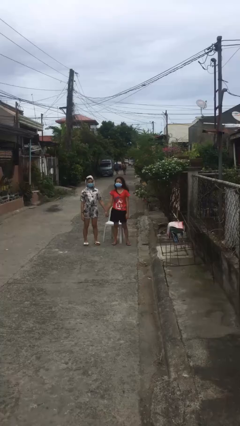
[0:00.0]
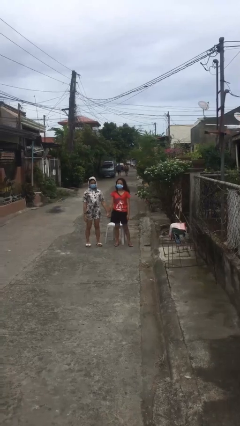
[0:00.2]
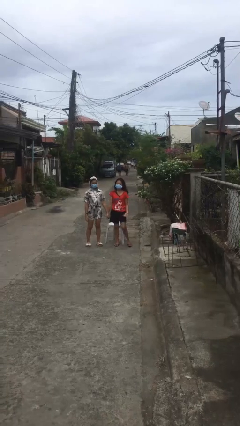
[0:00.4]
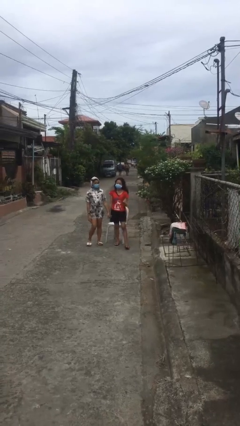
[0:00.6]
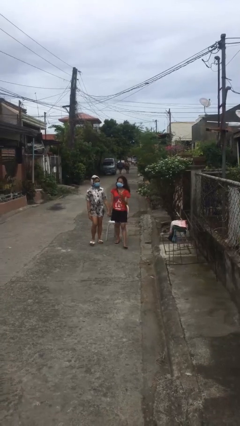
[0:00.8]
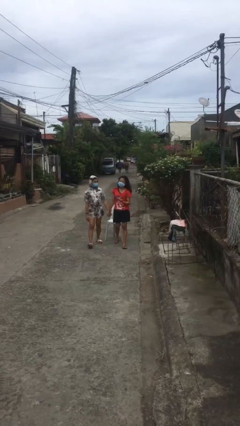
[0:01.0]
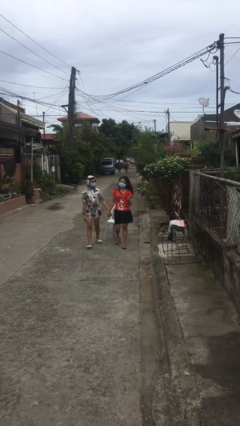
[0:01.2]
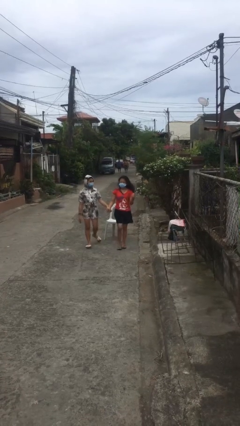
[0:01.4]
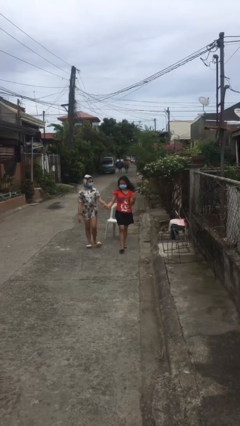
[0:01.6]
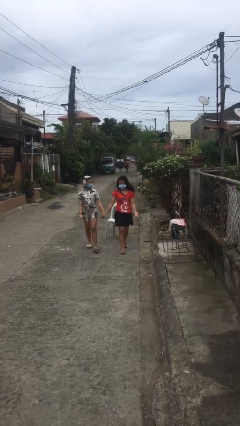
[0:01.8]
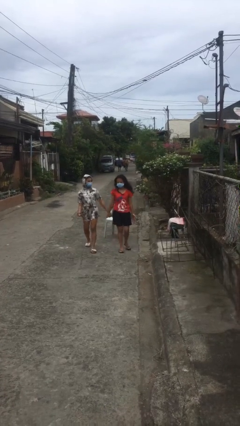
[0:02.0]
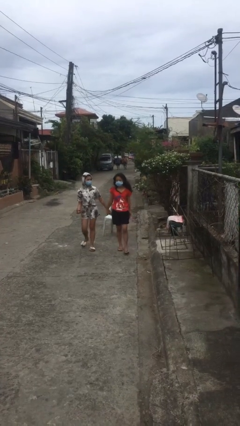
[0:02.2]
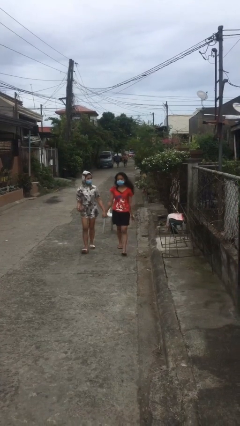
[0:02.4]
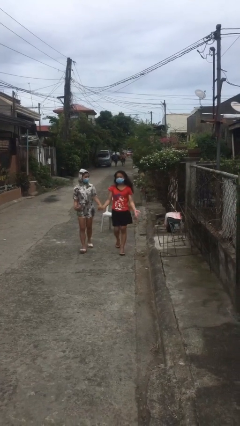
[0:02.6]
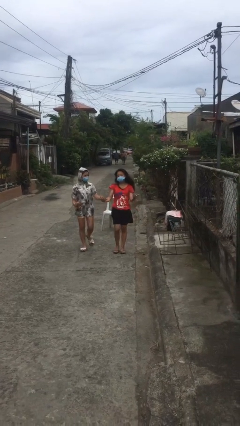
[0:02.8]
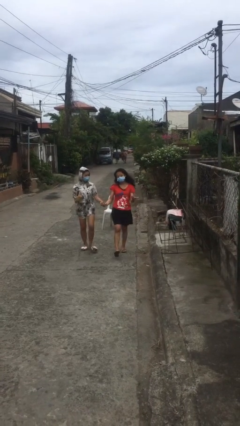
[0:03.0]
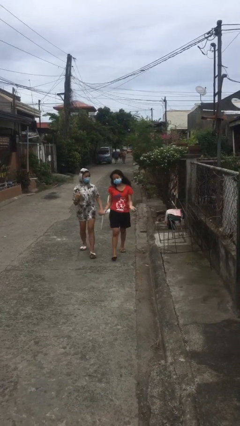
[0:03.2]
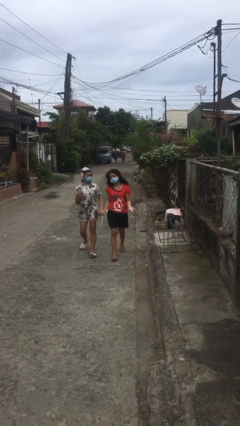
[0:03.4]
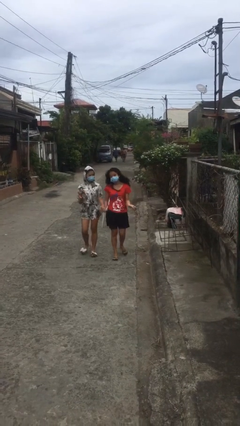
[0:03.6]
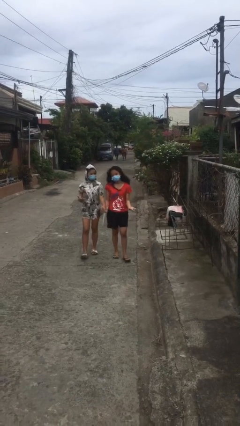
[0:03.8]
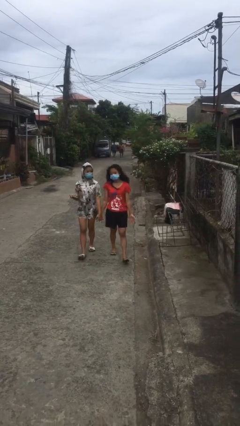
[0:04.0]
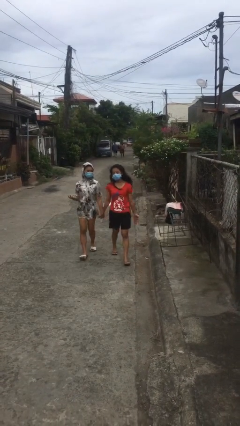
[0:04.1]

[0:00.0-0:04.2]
person holds hand

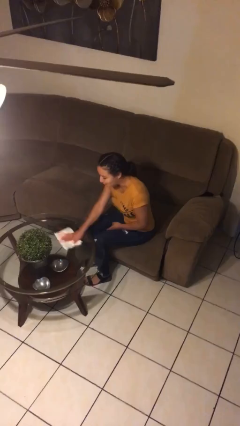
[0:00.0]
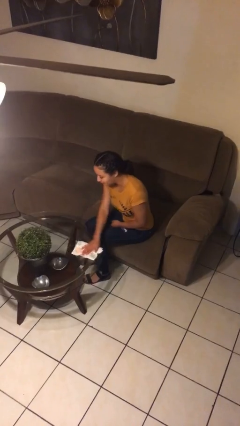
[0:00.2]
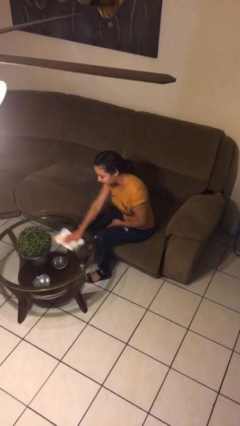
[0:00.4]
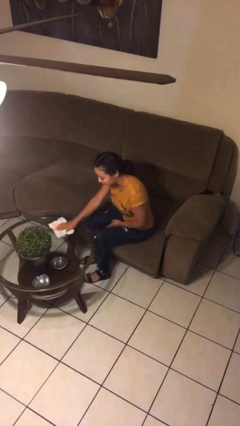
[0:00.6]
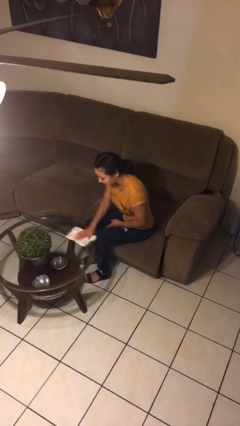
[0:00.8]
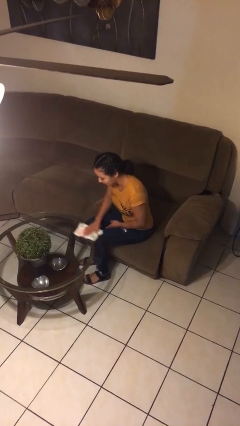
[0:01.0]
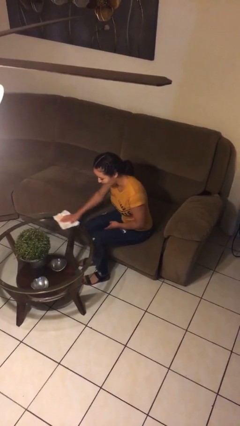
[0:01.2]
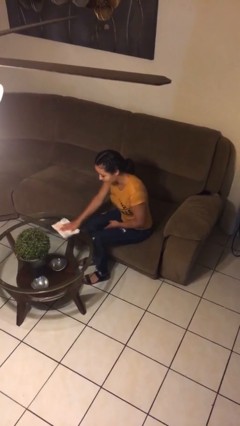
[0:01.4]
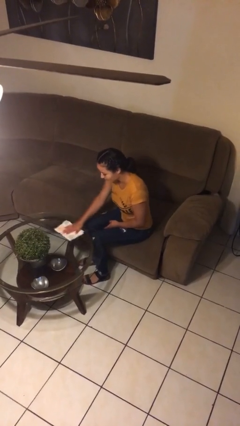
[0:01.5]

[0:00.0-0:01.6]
person cleans table with rag

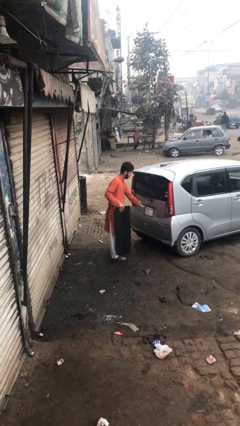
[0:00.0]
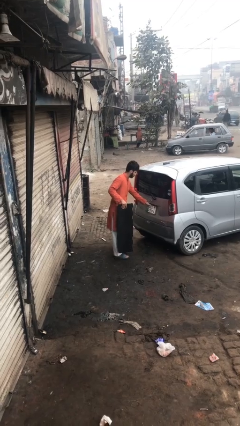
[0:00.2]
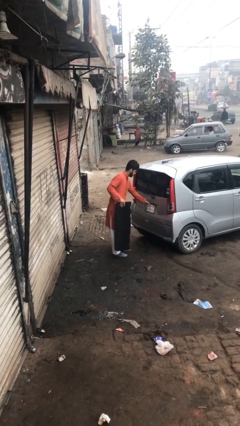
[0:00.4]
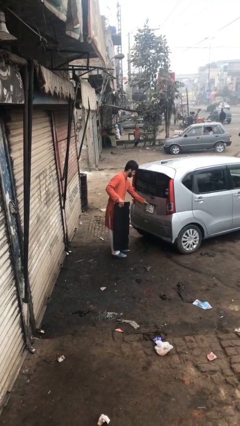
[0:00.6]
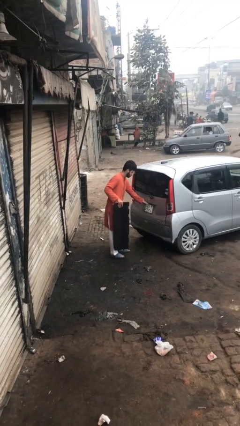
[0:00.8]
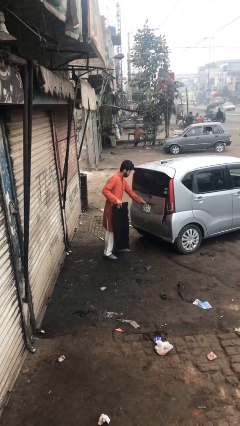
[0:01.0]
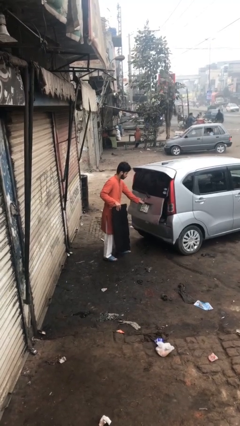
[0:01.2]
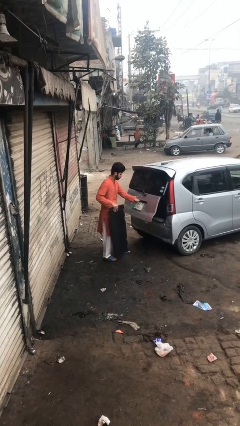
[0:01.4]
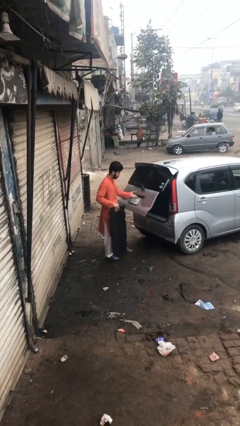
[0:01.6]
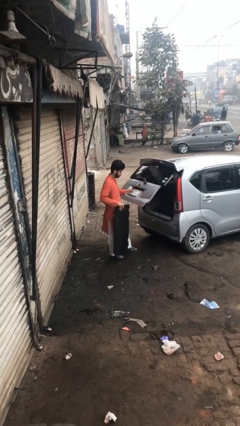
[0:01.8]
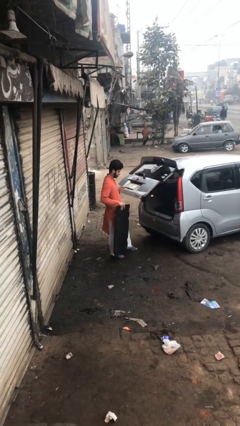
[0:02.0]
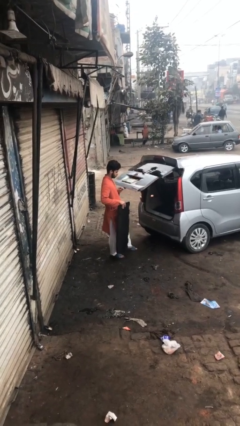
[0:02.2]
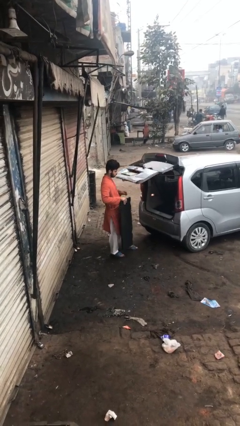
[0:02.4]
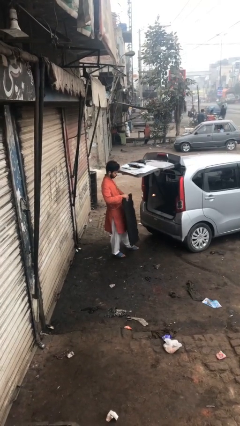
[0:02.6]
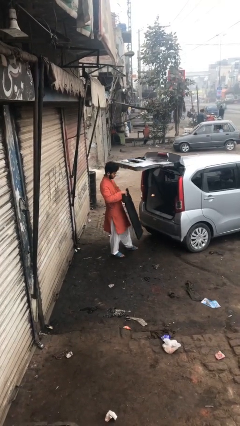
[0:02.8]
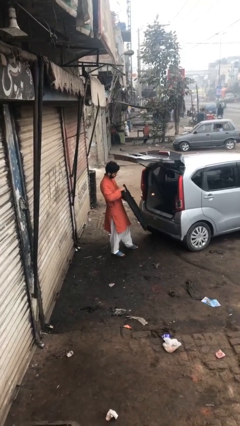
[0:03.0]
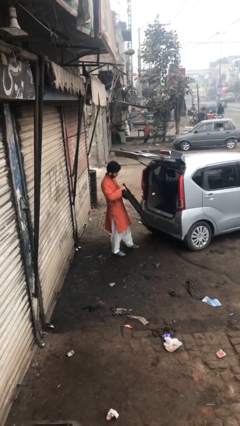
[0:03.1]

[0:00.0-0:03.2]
person opens car trunk

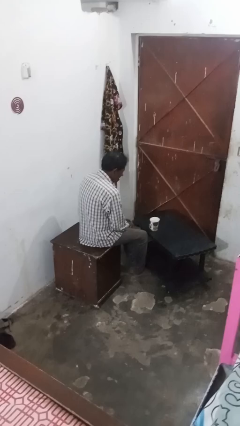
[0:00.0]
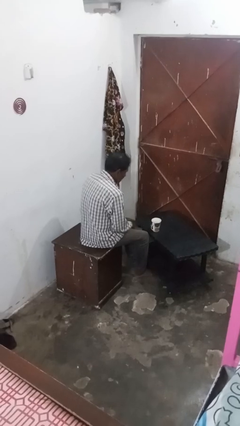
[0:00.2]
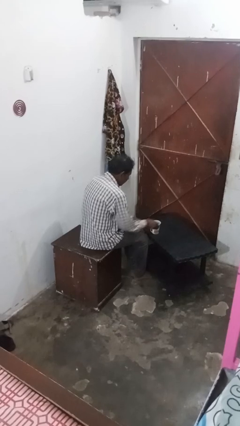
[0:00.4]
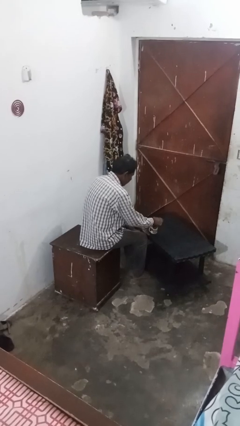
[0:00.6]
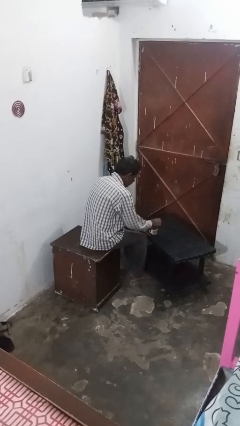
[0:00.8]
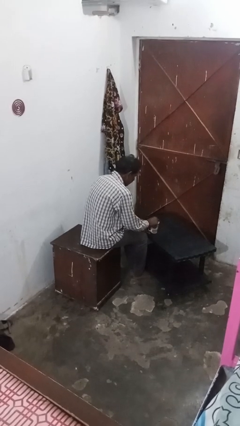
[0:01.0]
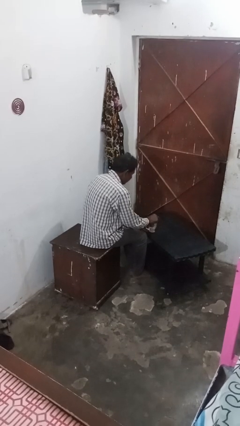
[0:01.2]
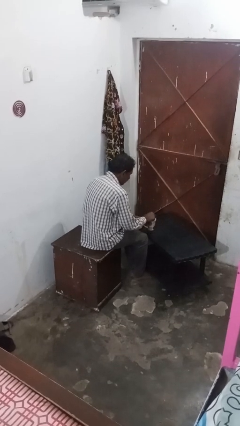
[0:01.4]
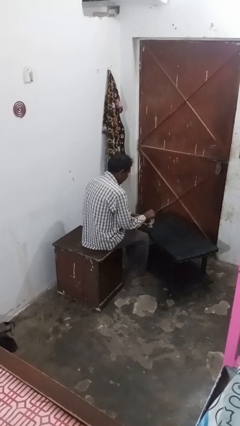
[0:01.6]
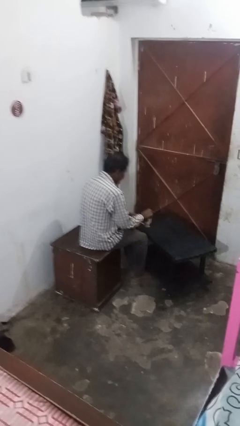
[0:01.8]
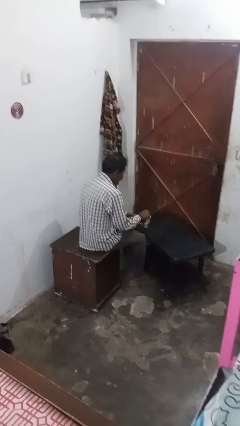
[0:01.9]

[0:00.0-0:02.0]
person stirs mug

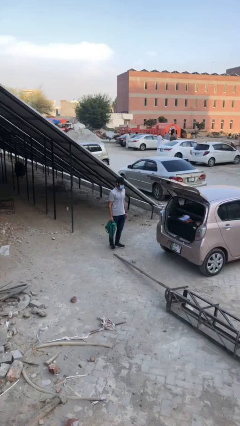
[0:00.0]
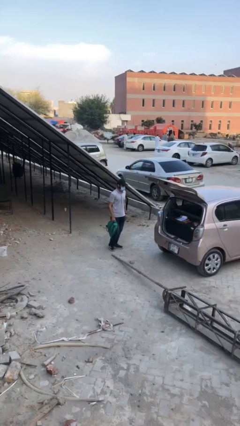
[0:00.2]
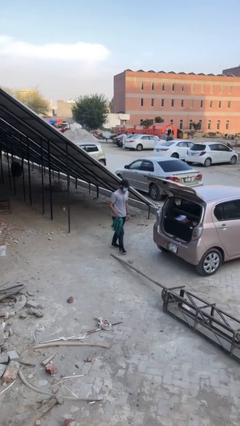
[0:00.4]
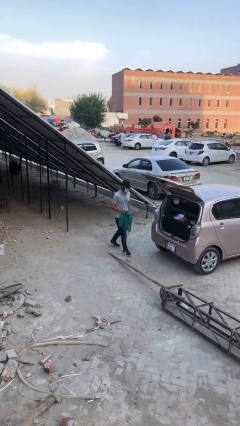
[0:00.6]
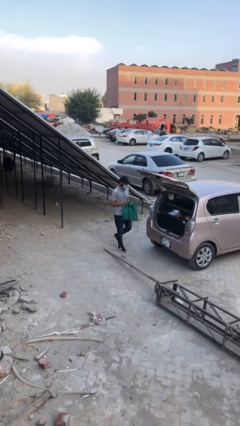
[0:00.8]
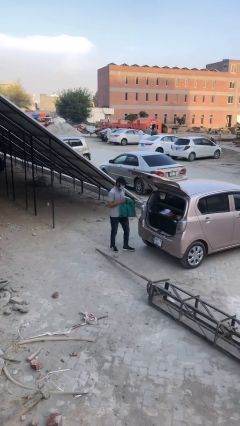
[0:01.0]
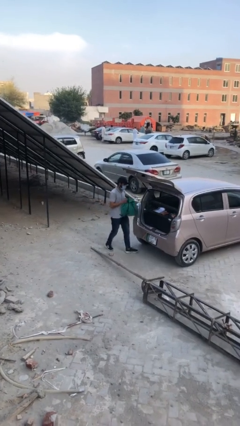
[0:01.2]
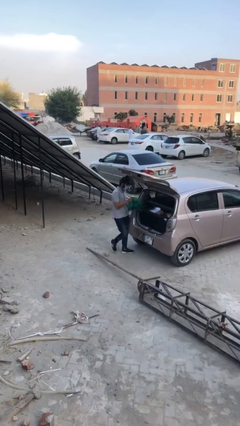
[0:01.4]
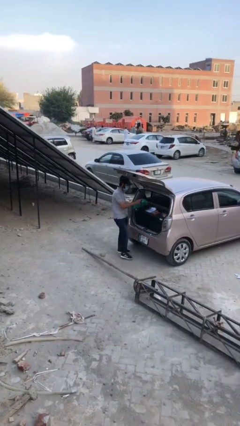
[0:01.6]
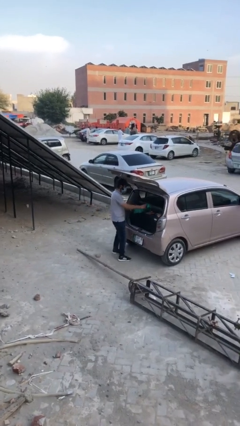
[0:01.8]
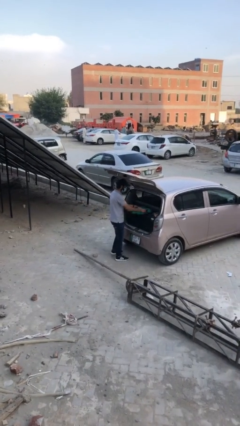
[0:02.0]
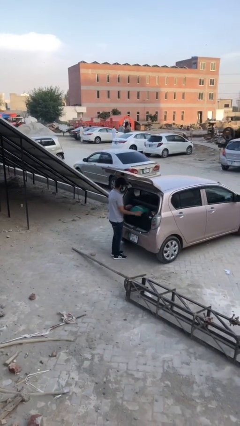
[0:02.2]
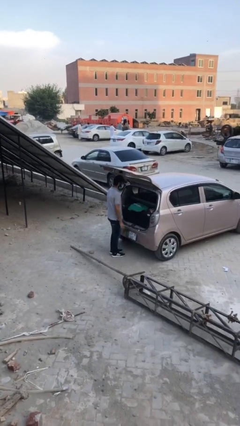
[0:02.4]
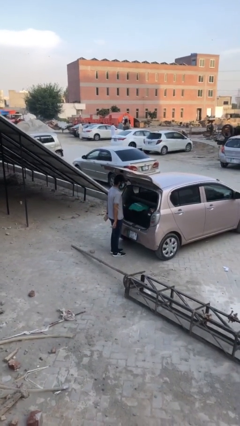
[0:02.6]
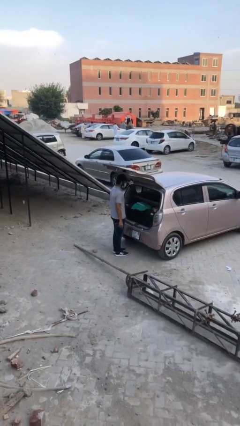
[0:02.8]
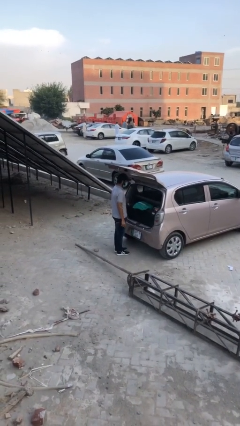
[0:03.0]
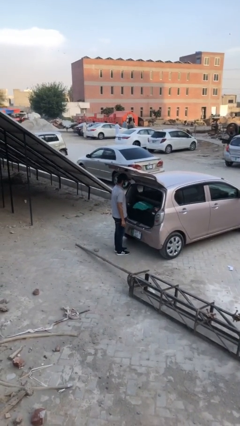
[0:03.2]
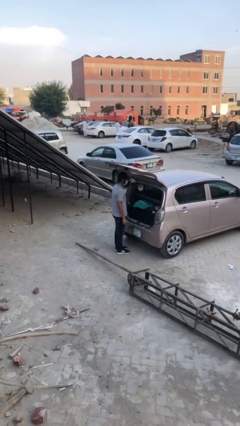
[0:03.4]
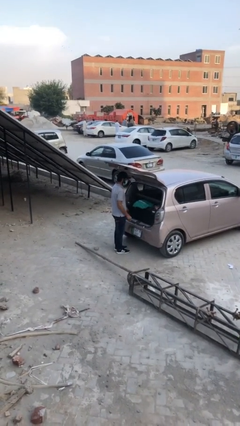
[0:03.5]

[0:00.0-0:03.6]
person loads car

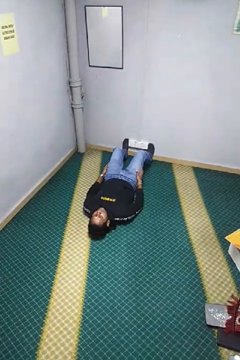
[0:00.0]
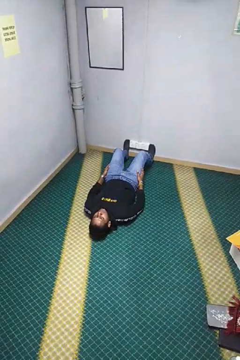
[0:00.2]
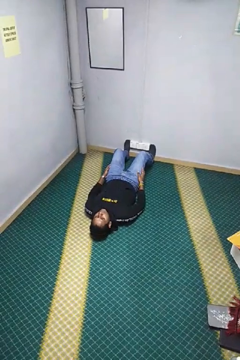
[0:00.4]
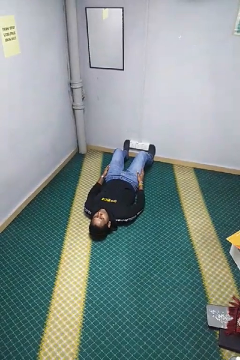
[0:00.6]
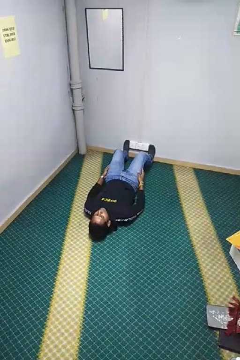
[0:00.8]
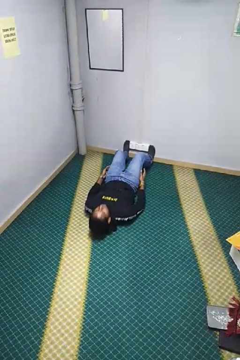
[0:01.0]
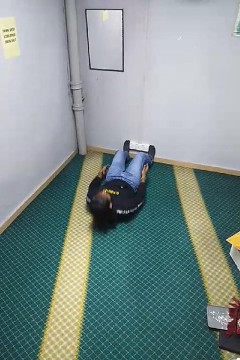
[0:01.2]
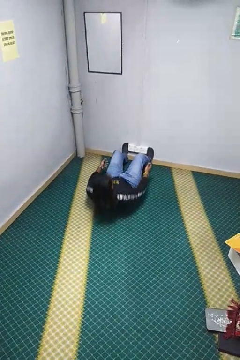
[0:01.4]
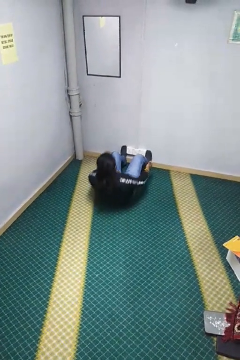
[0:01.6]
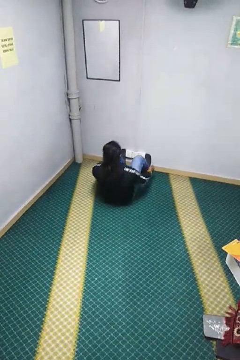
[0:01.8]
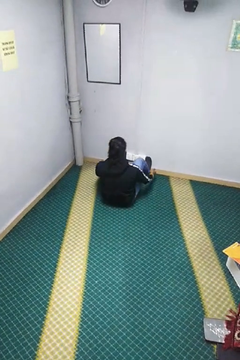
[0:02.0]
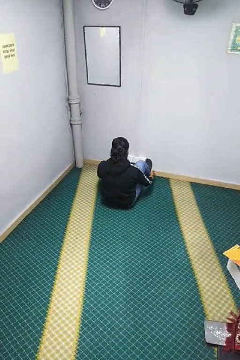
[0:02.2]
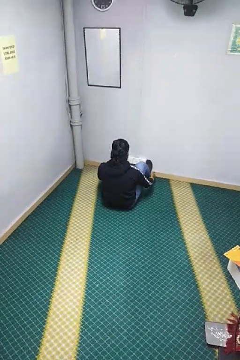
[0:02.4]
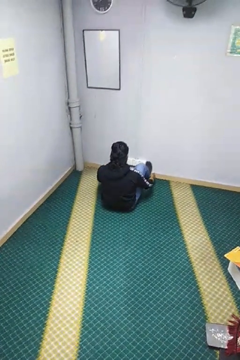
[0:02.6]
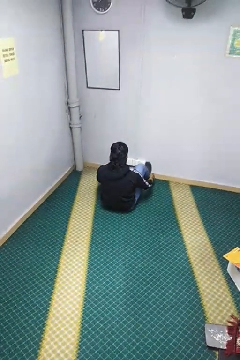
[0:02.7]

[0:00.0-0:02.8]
person exercises with situp

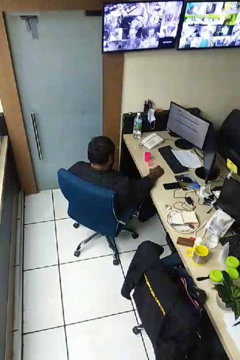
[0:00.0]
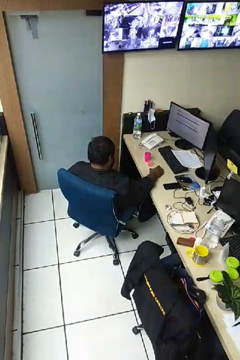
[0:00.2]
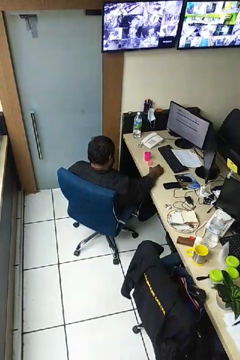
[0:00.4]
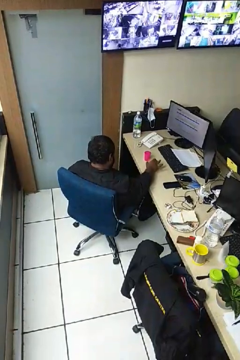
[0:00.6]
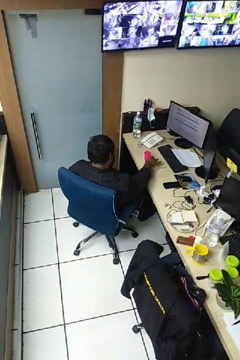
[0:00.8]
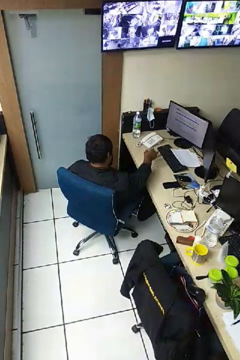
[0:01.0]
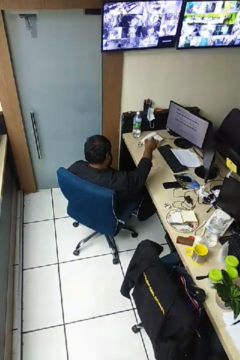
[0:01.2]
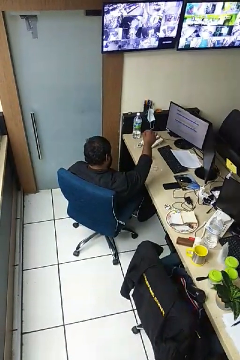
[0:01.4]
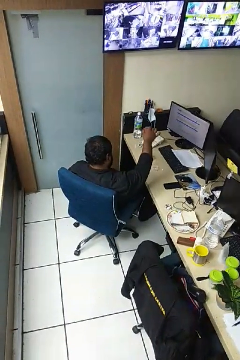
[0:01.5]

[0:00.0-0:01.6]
person picks up object from table
